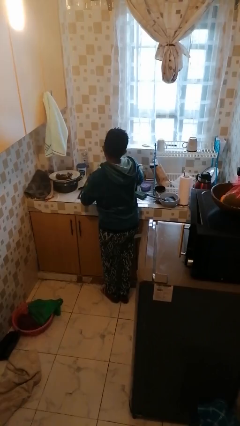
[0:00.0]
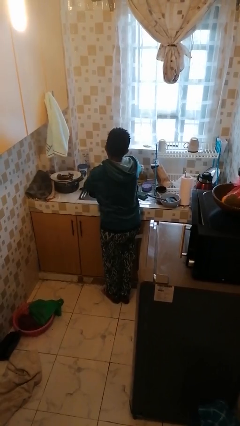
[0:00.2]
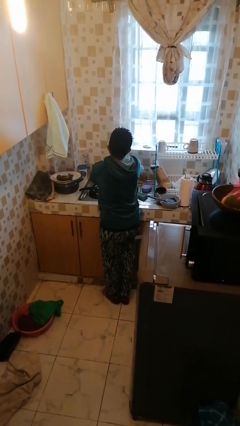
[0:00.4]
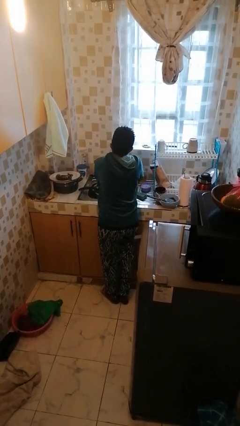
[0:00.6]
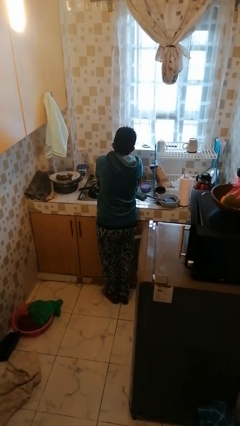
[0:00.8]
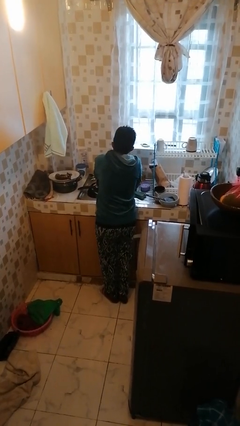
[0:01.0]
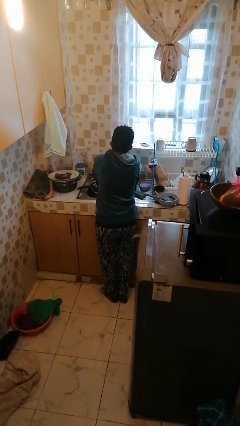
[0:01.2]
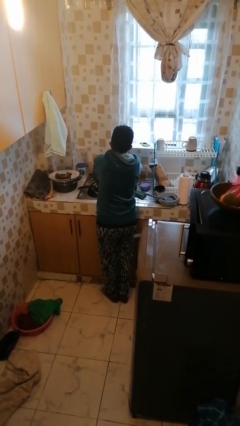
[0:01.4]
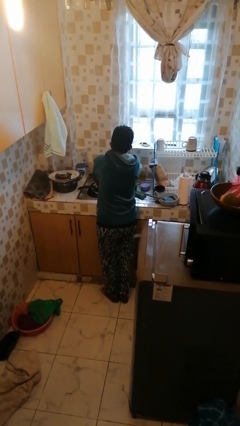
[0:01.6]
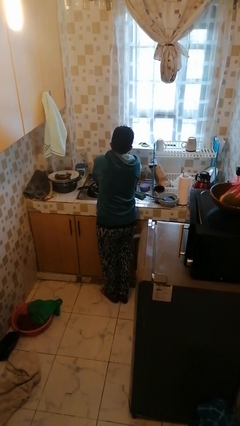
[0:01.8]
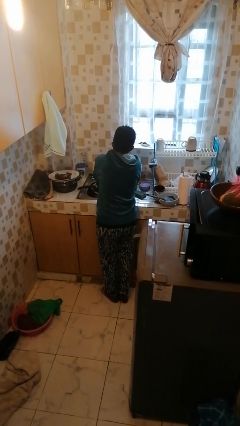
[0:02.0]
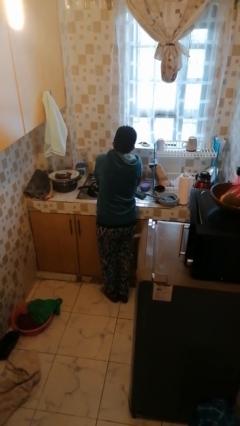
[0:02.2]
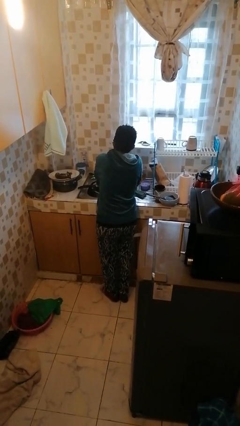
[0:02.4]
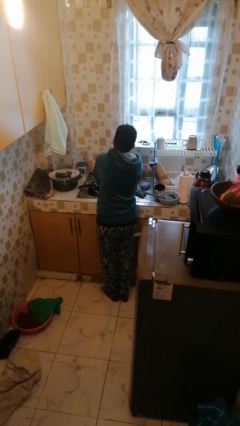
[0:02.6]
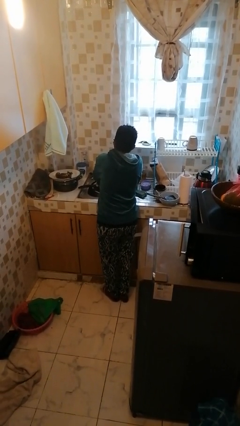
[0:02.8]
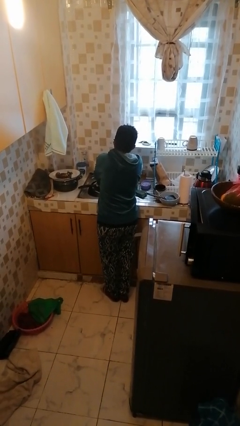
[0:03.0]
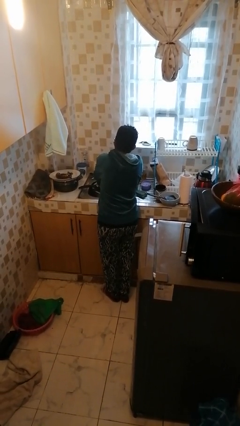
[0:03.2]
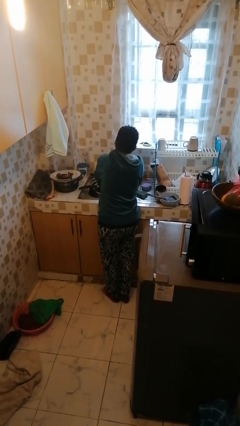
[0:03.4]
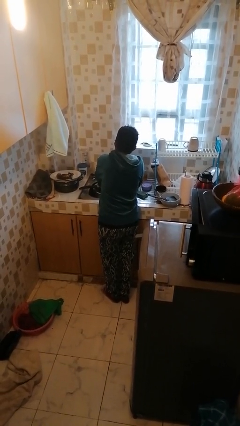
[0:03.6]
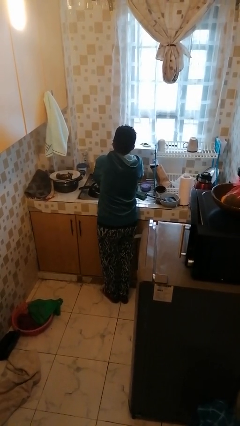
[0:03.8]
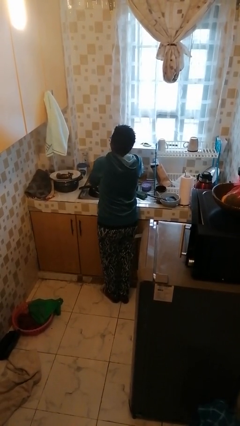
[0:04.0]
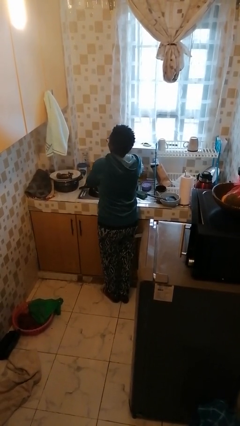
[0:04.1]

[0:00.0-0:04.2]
person washes hands

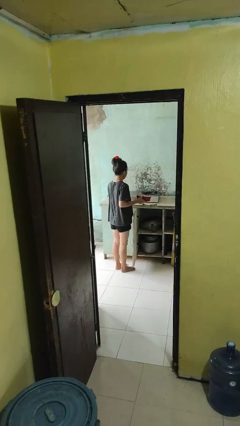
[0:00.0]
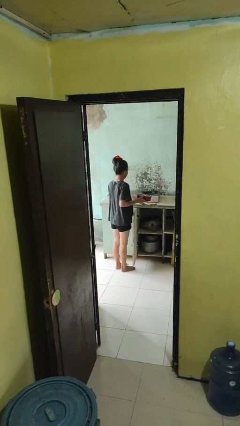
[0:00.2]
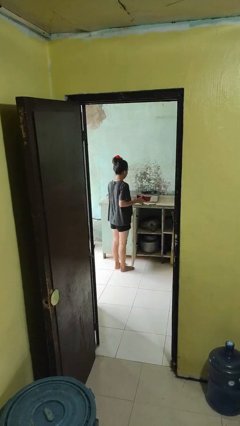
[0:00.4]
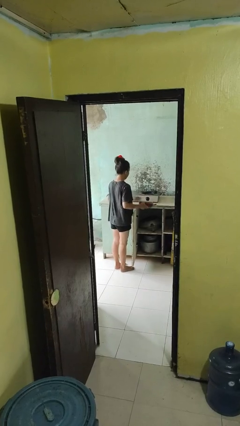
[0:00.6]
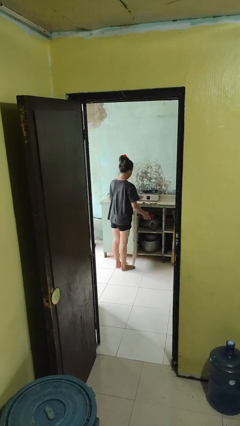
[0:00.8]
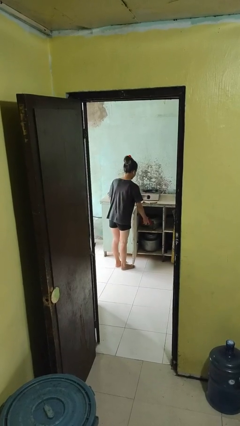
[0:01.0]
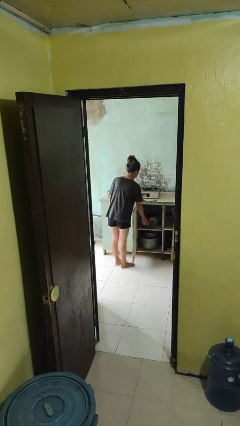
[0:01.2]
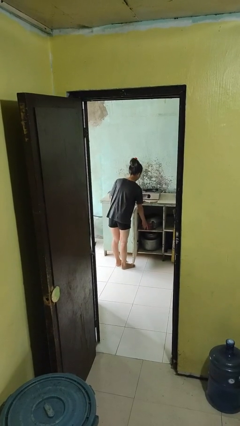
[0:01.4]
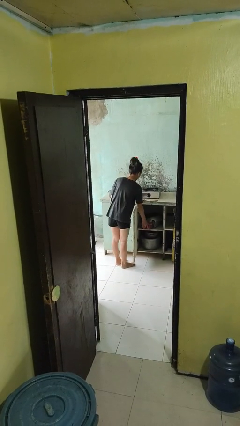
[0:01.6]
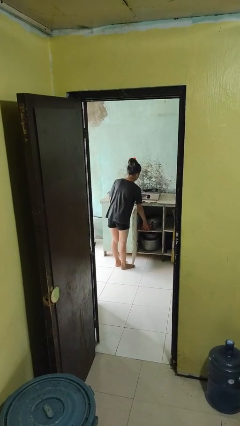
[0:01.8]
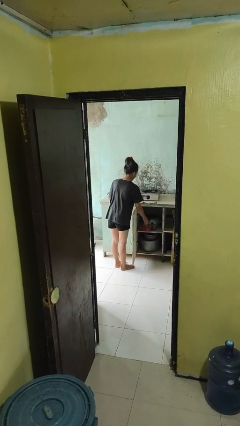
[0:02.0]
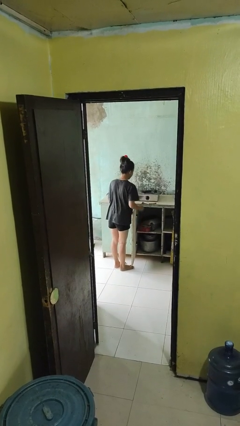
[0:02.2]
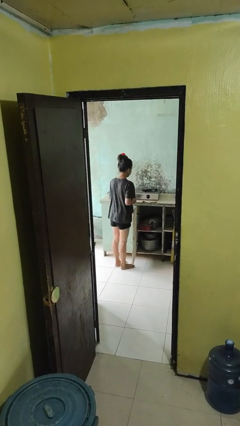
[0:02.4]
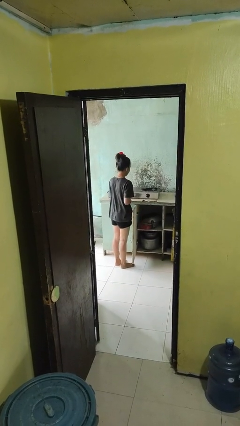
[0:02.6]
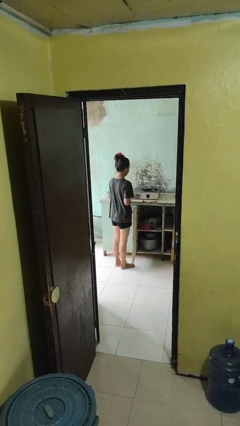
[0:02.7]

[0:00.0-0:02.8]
person puts object in cabinet

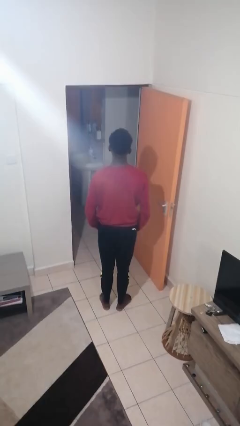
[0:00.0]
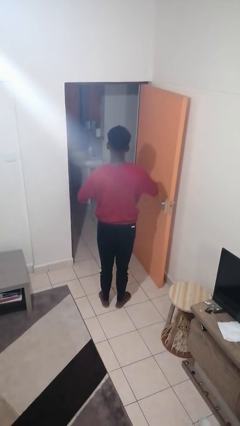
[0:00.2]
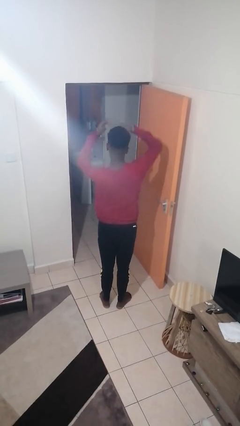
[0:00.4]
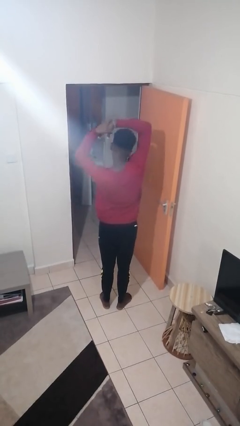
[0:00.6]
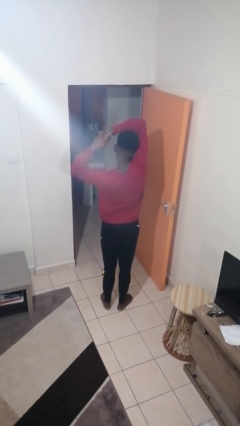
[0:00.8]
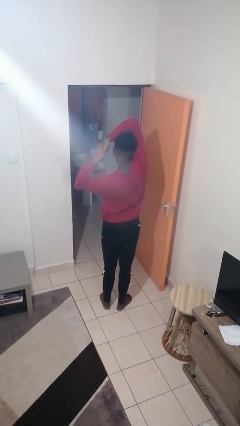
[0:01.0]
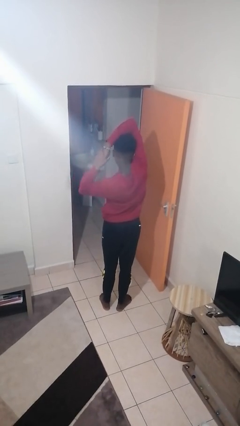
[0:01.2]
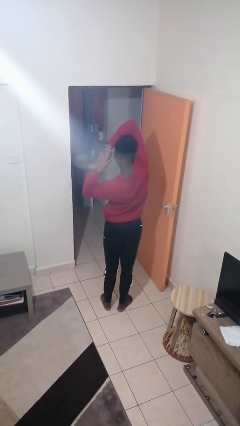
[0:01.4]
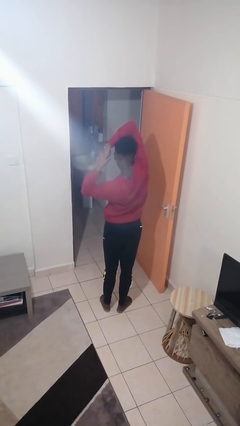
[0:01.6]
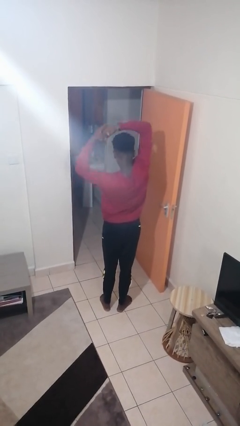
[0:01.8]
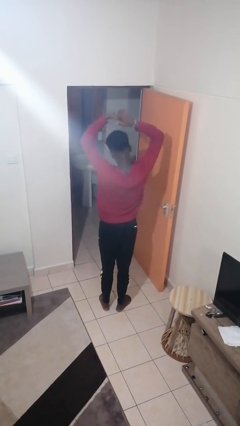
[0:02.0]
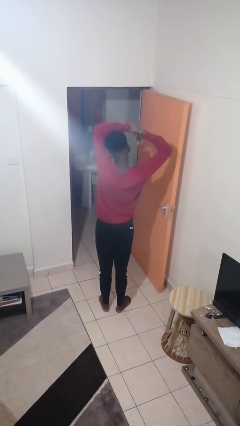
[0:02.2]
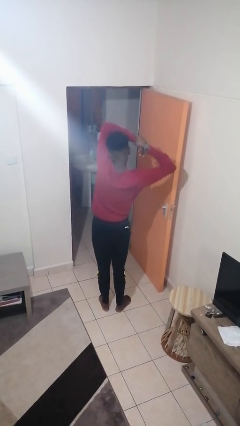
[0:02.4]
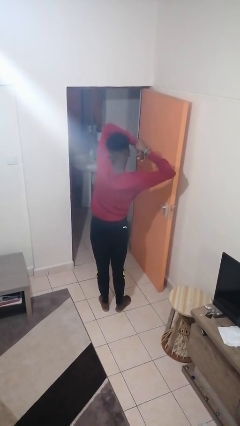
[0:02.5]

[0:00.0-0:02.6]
person stretches arms over head

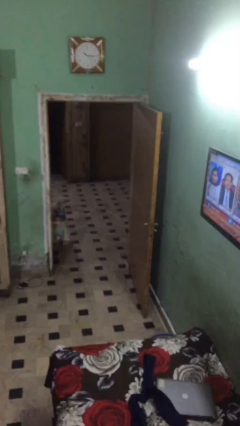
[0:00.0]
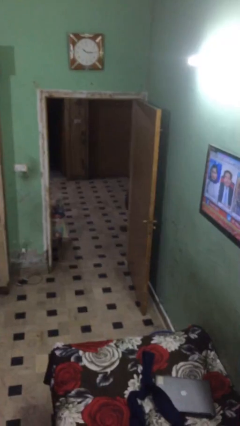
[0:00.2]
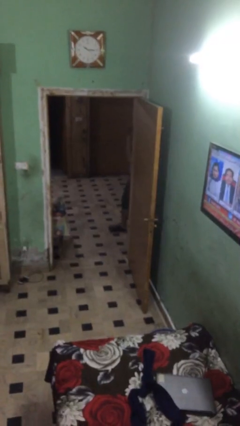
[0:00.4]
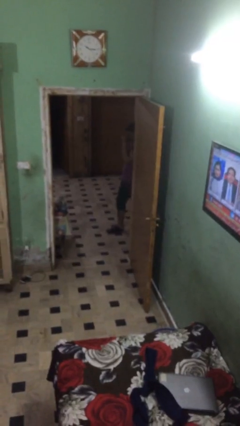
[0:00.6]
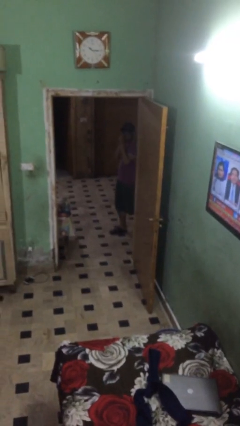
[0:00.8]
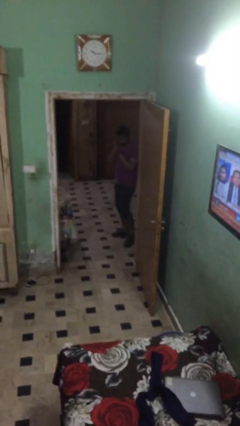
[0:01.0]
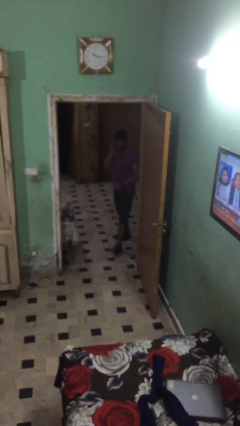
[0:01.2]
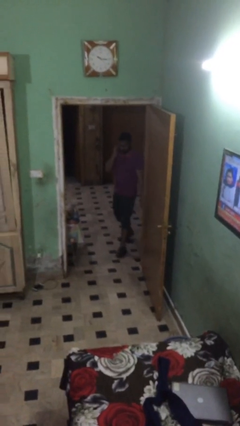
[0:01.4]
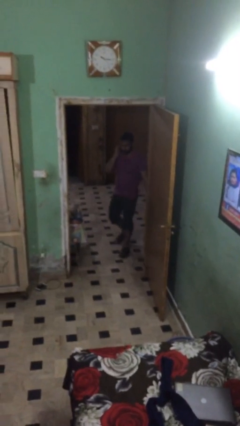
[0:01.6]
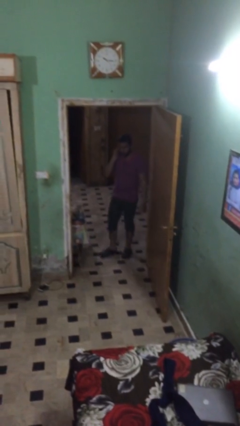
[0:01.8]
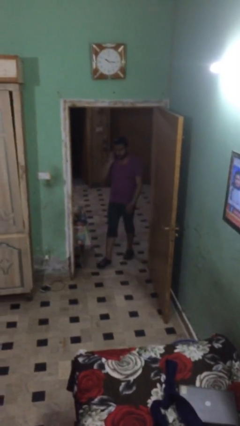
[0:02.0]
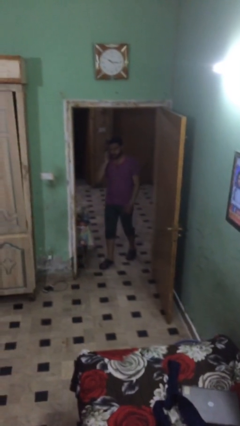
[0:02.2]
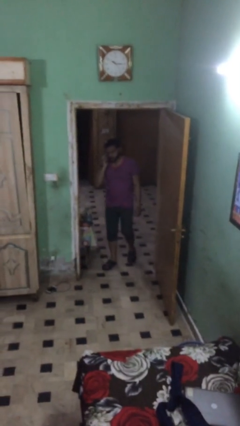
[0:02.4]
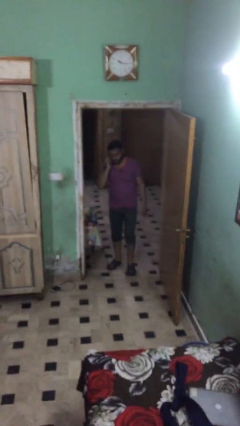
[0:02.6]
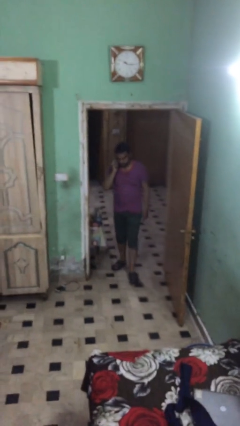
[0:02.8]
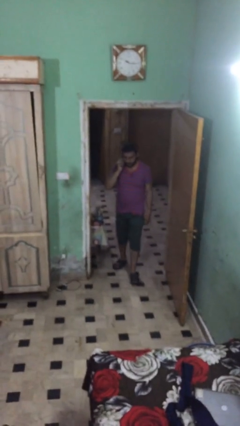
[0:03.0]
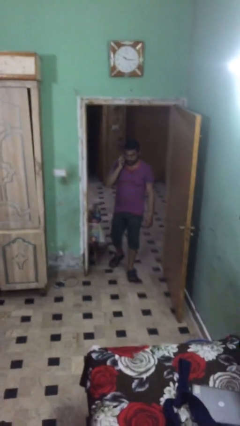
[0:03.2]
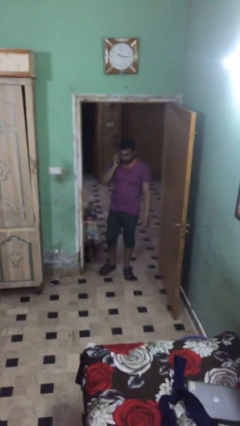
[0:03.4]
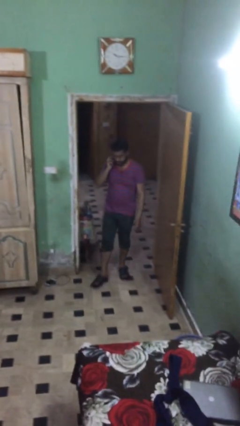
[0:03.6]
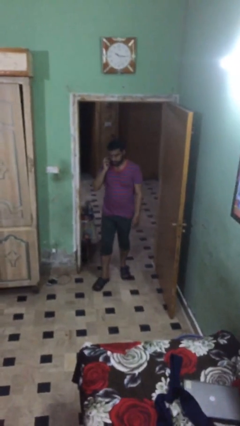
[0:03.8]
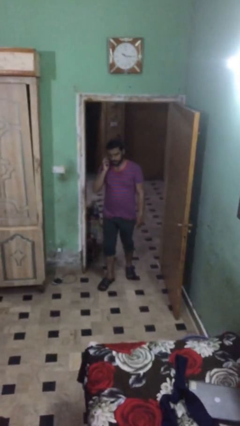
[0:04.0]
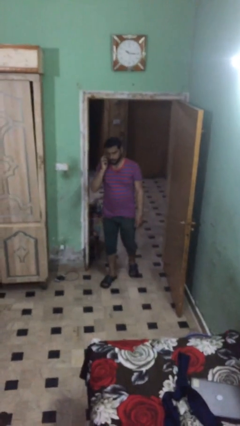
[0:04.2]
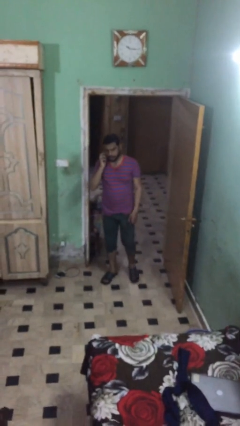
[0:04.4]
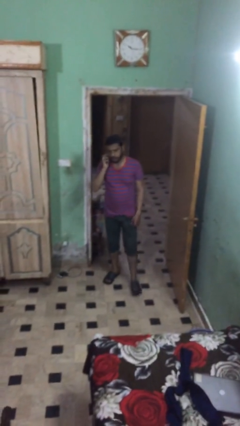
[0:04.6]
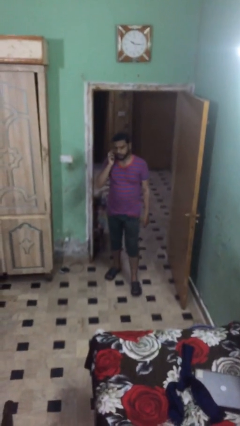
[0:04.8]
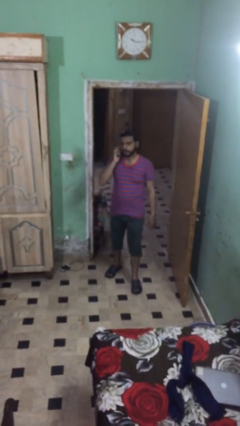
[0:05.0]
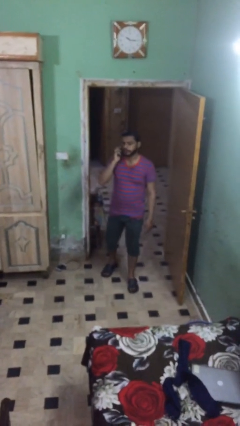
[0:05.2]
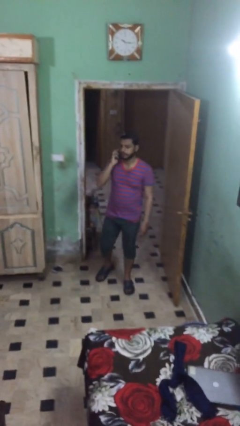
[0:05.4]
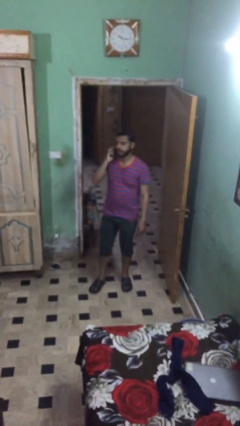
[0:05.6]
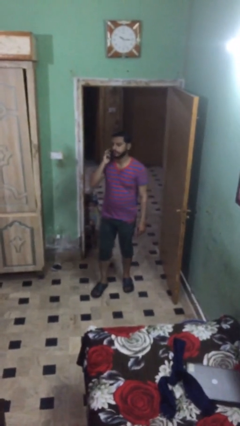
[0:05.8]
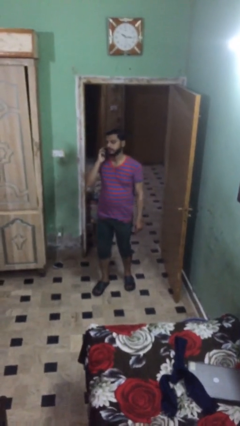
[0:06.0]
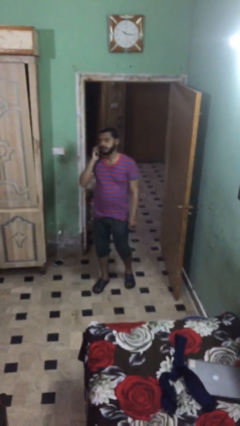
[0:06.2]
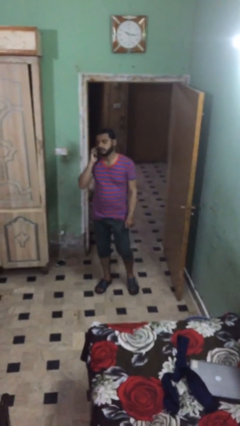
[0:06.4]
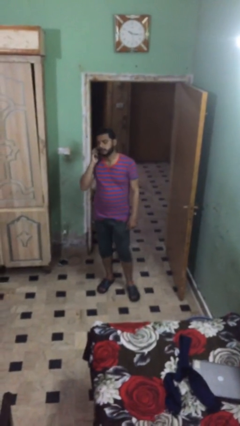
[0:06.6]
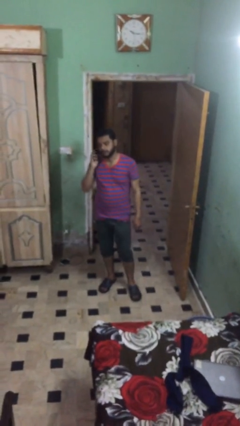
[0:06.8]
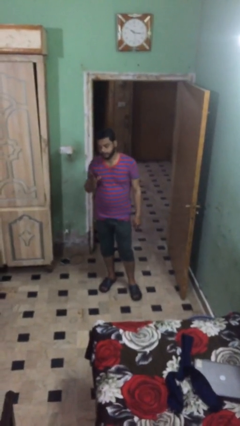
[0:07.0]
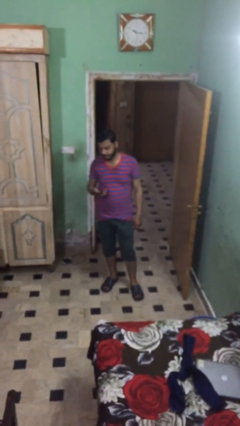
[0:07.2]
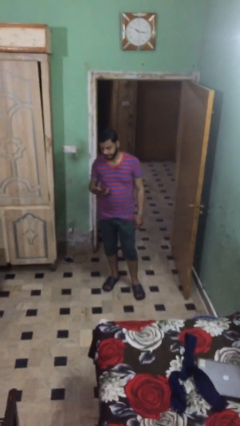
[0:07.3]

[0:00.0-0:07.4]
person enters scene through structure

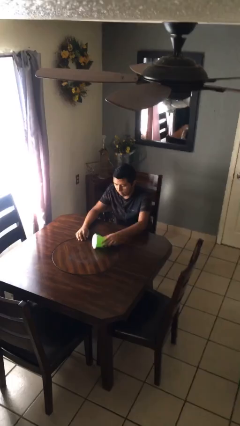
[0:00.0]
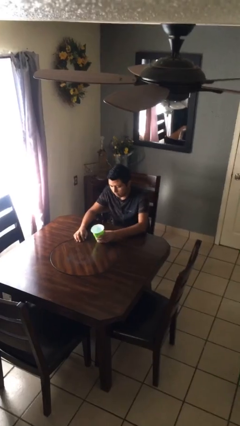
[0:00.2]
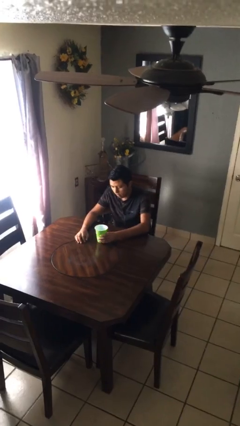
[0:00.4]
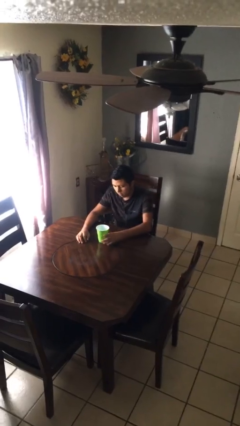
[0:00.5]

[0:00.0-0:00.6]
person sets upright glass

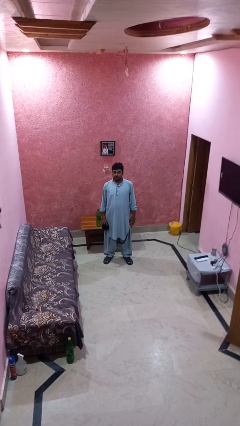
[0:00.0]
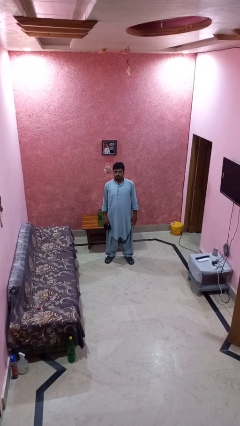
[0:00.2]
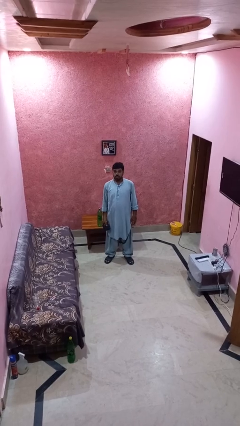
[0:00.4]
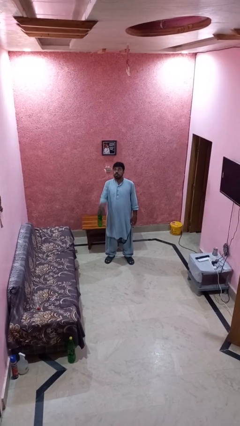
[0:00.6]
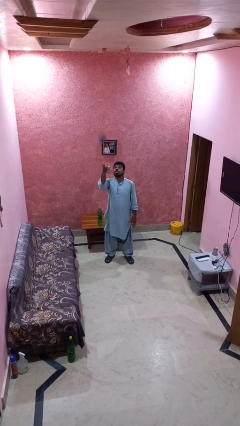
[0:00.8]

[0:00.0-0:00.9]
person drops object
